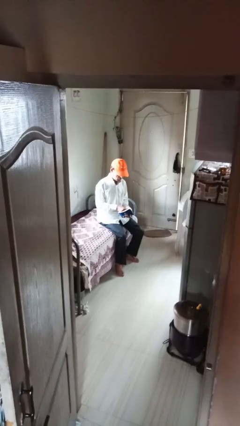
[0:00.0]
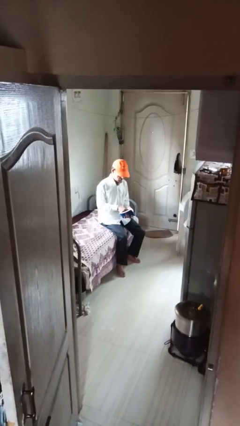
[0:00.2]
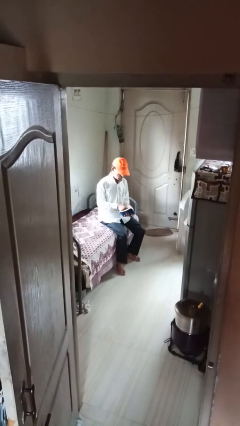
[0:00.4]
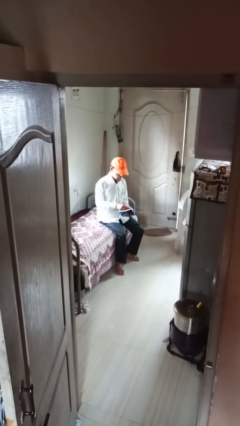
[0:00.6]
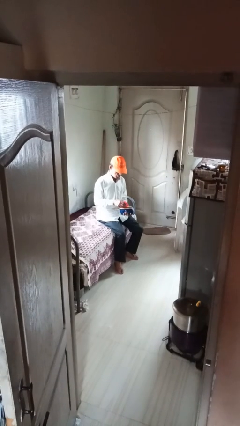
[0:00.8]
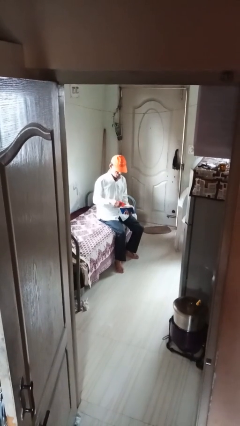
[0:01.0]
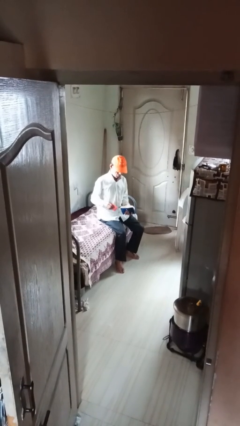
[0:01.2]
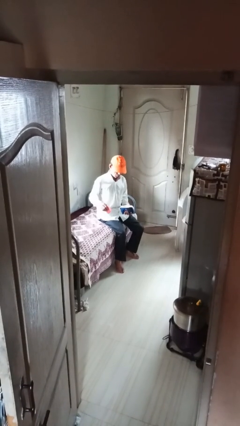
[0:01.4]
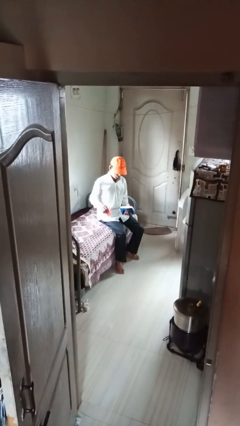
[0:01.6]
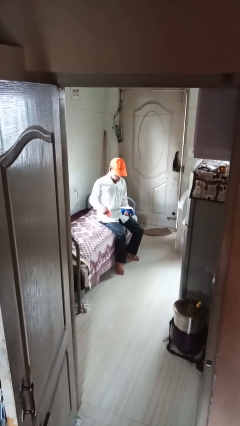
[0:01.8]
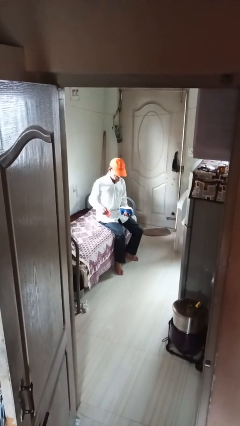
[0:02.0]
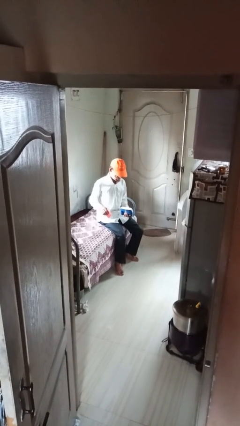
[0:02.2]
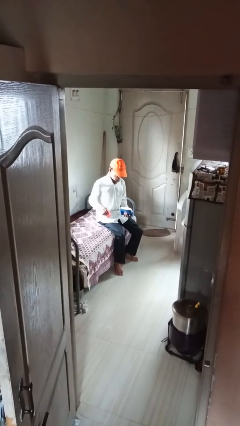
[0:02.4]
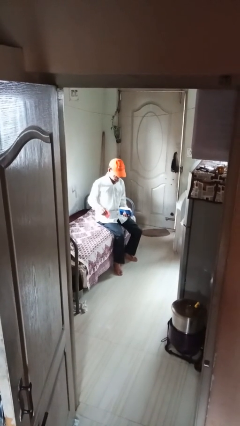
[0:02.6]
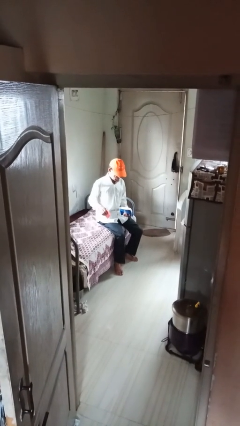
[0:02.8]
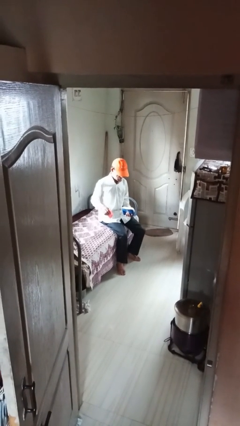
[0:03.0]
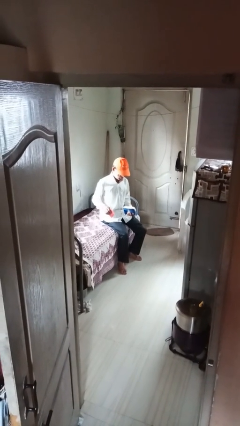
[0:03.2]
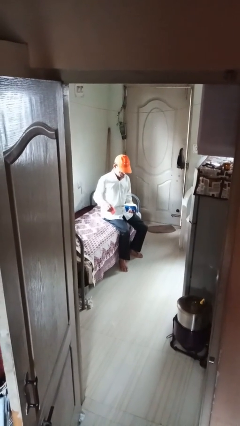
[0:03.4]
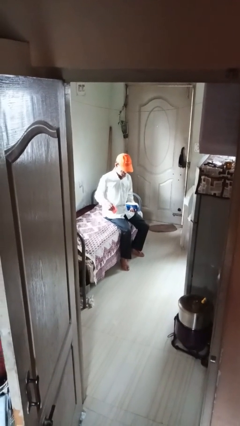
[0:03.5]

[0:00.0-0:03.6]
person takes object from purse

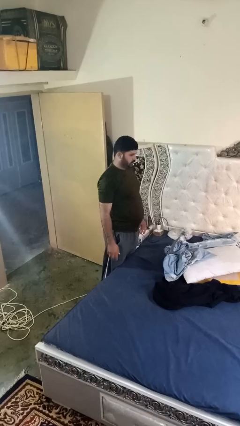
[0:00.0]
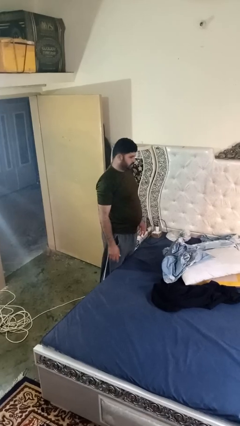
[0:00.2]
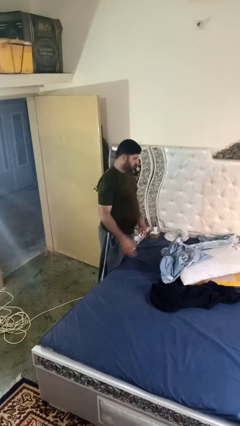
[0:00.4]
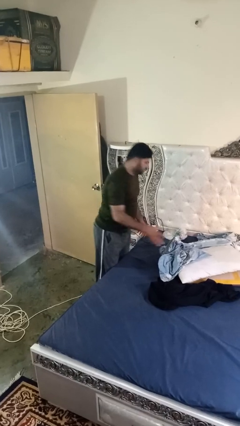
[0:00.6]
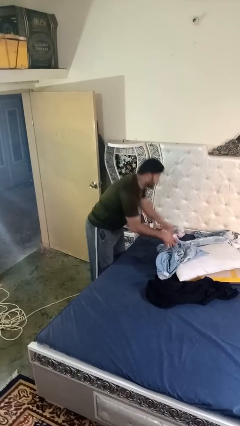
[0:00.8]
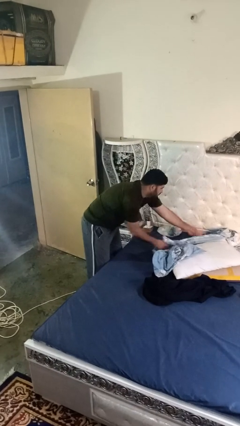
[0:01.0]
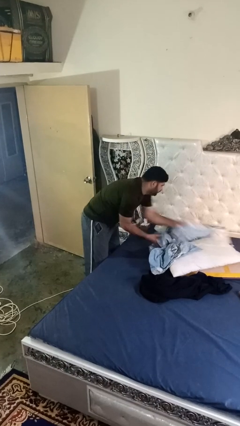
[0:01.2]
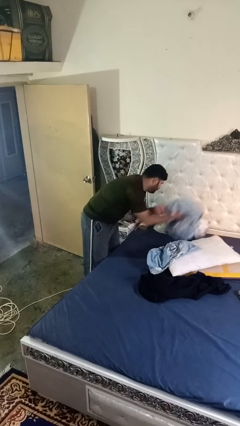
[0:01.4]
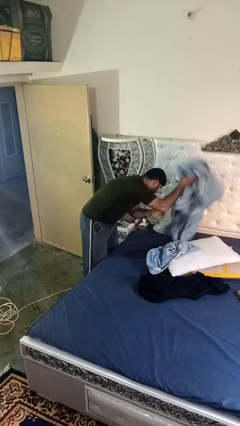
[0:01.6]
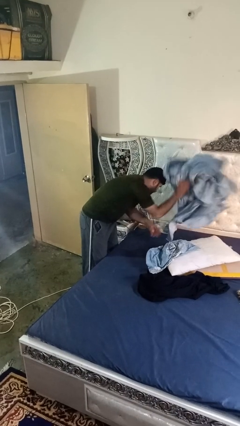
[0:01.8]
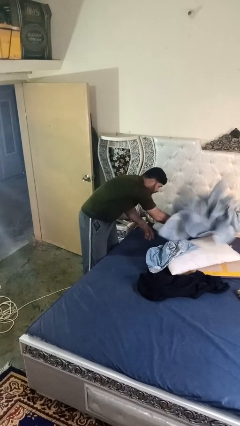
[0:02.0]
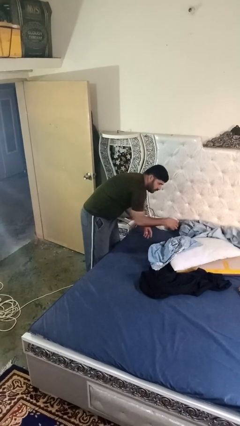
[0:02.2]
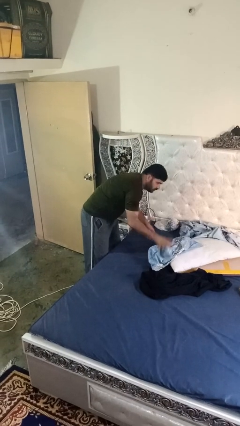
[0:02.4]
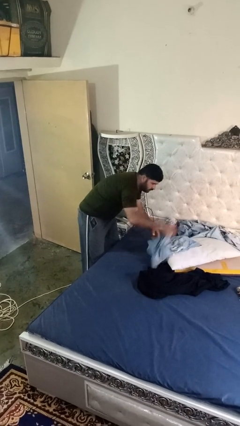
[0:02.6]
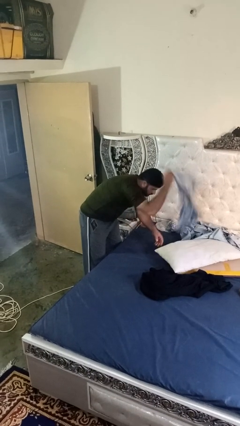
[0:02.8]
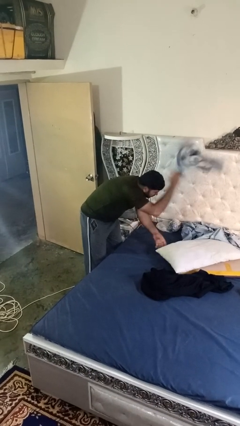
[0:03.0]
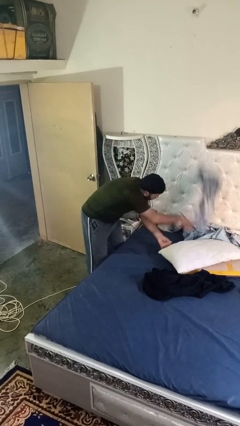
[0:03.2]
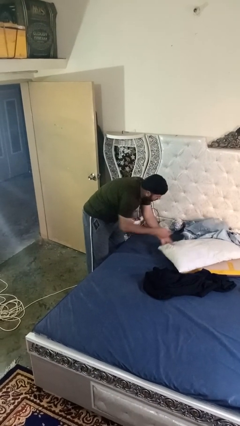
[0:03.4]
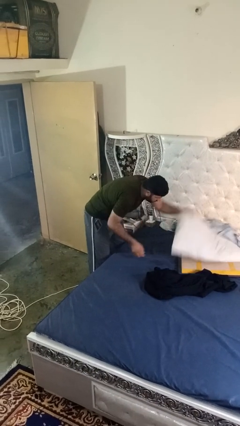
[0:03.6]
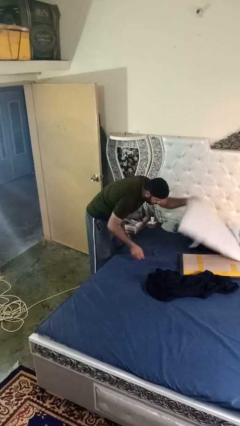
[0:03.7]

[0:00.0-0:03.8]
person searches under bed

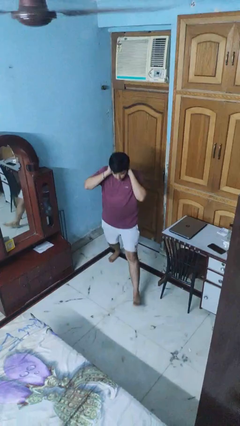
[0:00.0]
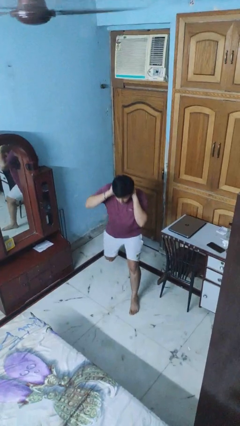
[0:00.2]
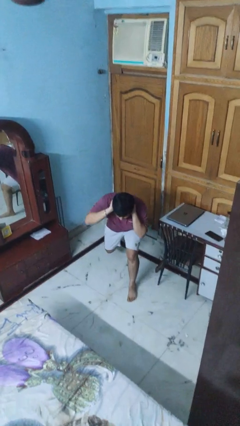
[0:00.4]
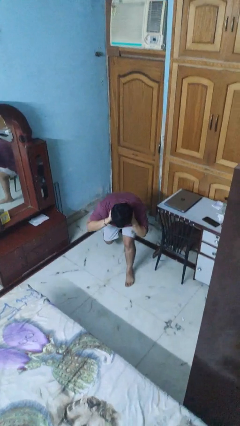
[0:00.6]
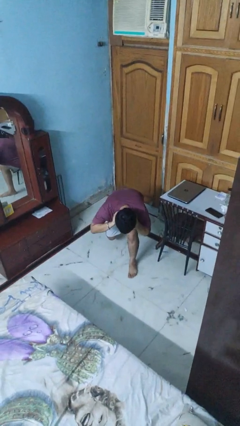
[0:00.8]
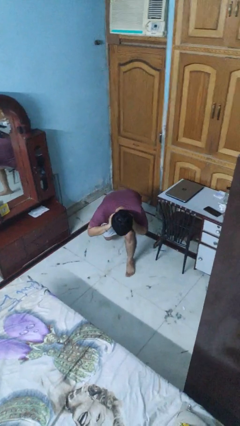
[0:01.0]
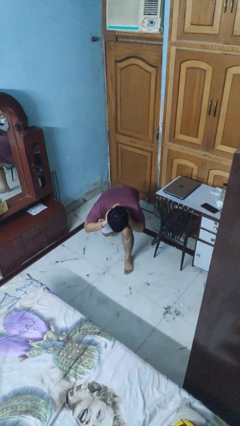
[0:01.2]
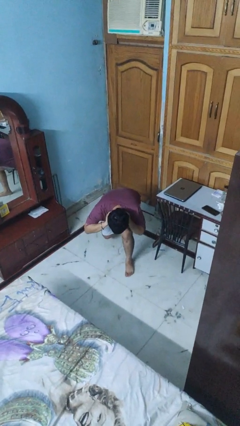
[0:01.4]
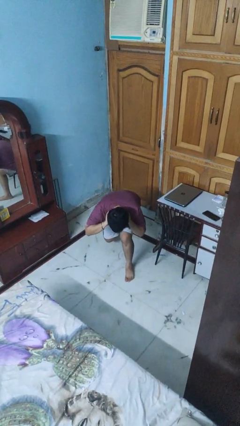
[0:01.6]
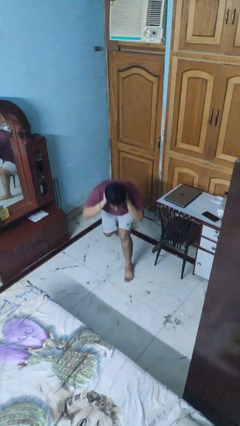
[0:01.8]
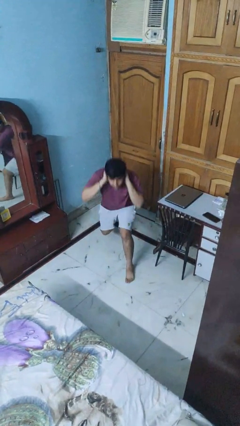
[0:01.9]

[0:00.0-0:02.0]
person exercises with lunges

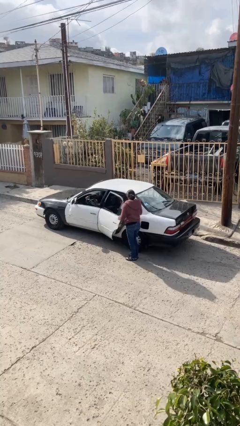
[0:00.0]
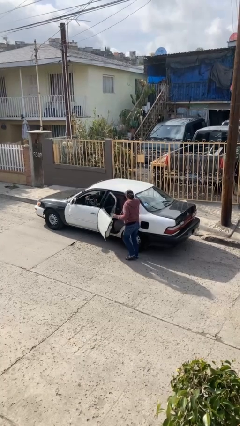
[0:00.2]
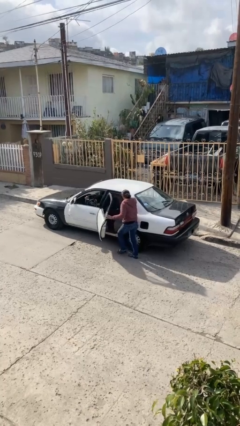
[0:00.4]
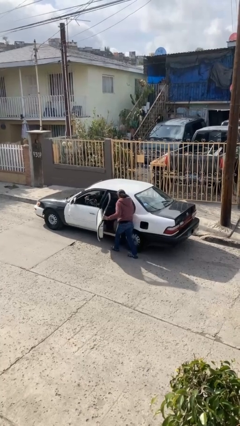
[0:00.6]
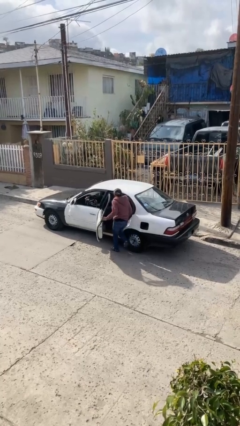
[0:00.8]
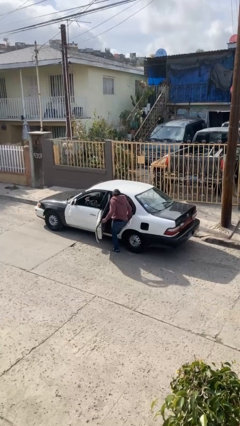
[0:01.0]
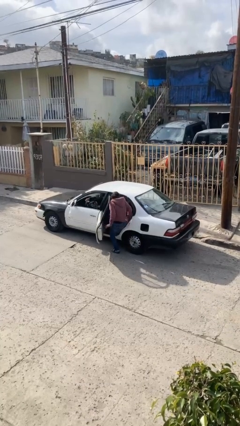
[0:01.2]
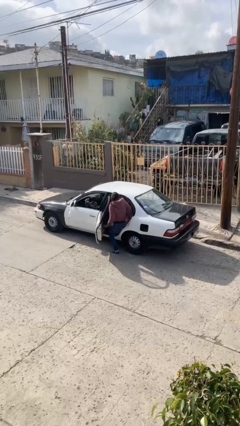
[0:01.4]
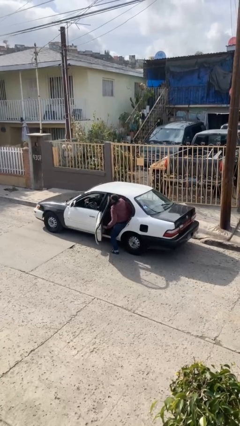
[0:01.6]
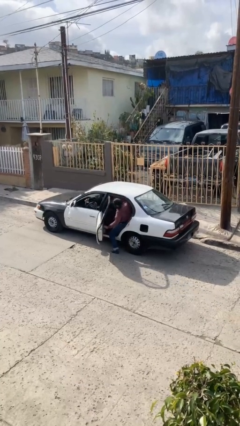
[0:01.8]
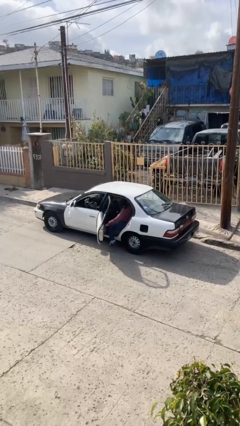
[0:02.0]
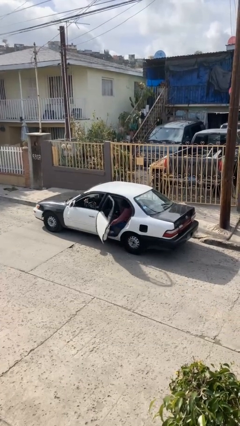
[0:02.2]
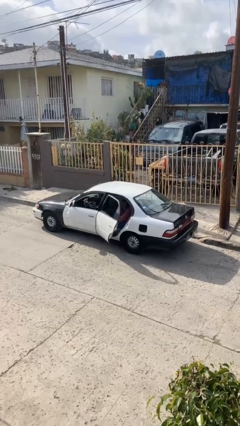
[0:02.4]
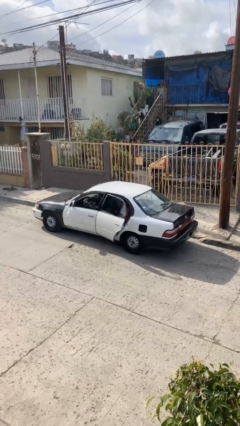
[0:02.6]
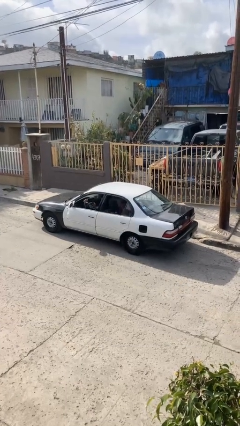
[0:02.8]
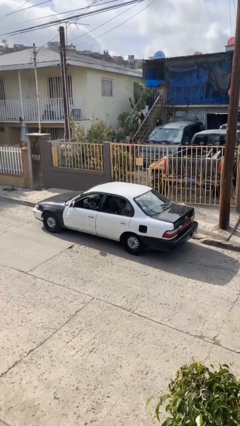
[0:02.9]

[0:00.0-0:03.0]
car picks up person

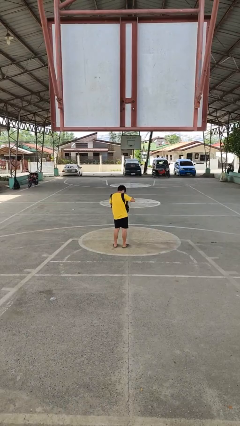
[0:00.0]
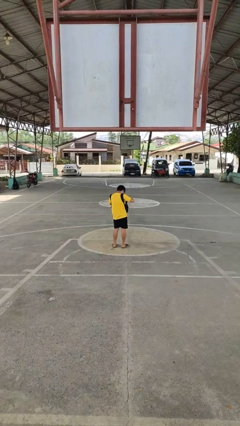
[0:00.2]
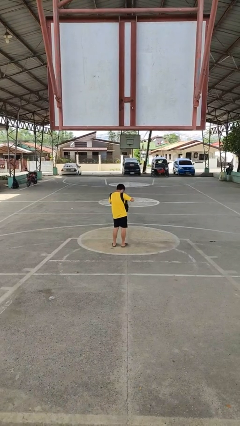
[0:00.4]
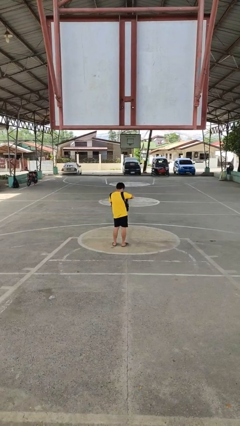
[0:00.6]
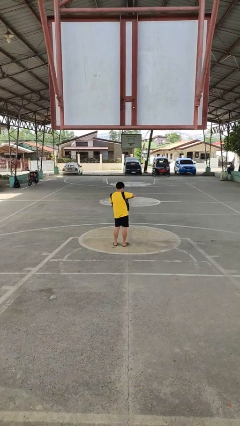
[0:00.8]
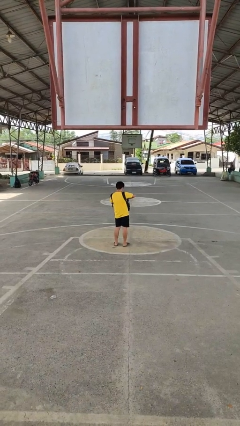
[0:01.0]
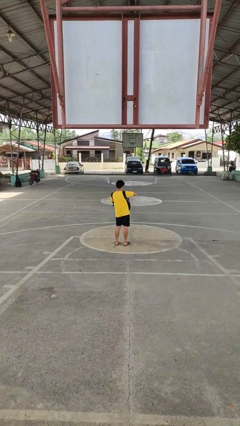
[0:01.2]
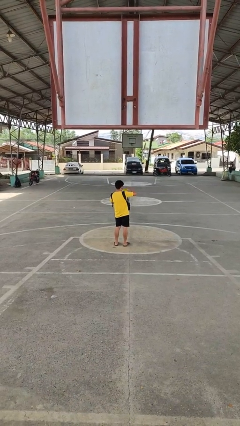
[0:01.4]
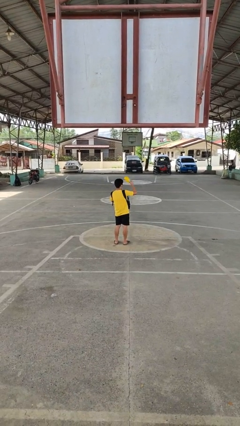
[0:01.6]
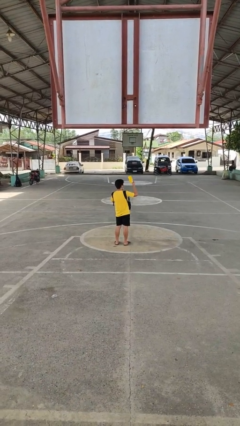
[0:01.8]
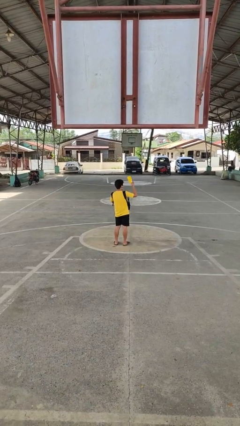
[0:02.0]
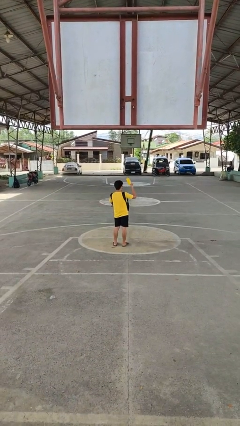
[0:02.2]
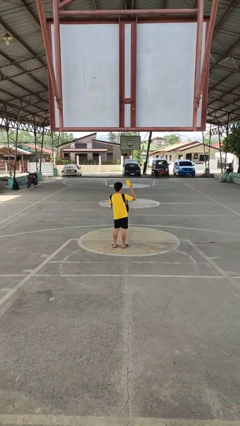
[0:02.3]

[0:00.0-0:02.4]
person takes object from backpack

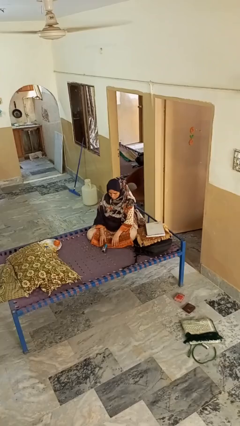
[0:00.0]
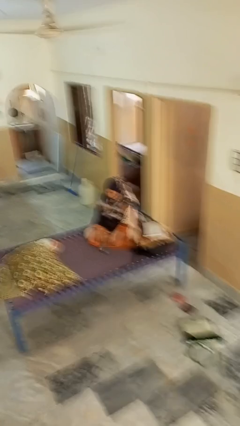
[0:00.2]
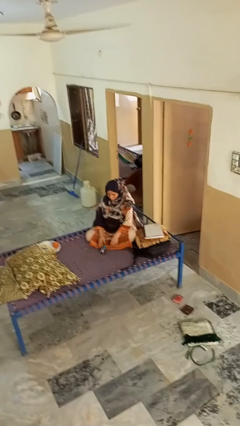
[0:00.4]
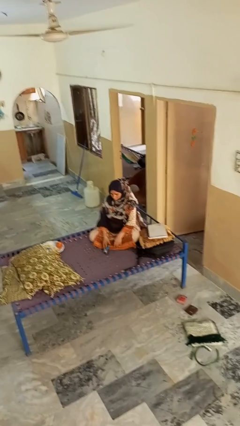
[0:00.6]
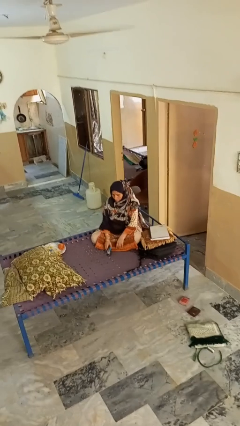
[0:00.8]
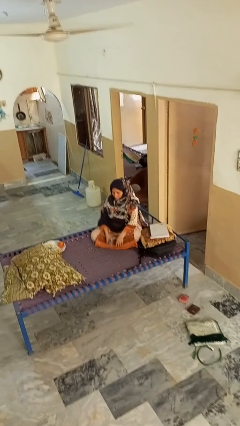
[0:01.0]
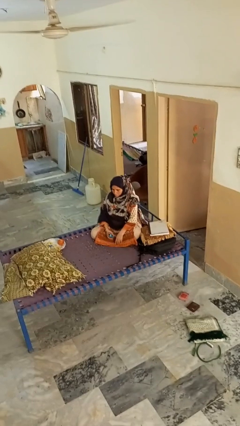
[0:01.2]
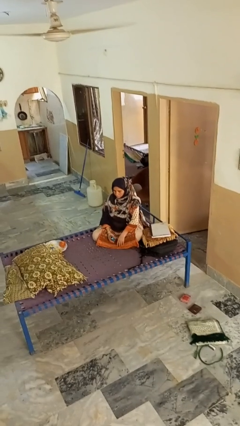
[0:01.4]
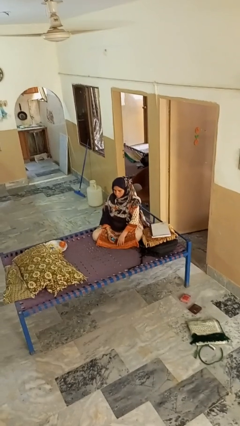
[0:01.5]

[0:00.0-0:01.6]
person picks up object from floor

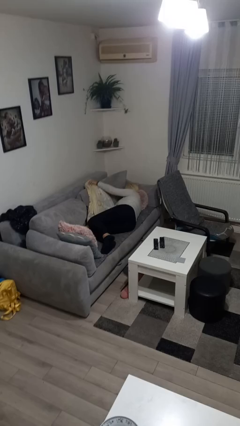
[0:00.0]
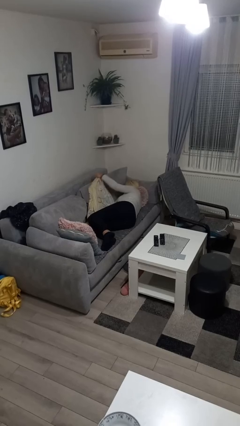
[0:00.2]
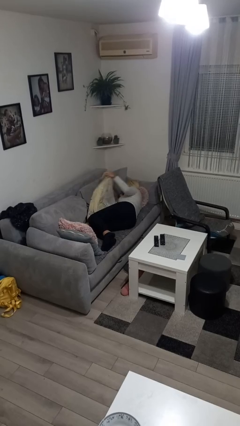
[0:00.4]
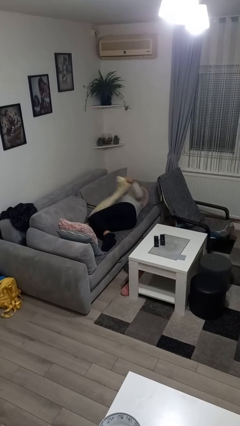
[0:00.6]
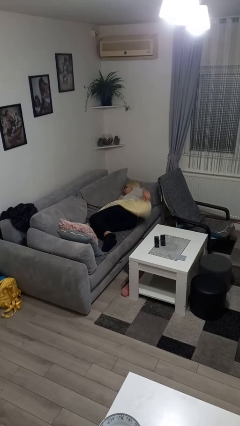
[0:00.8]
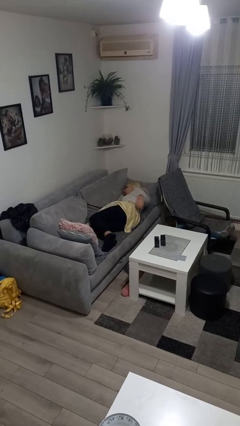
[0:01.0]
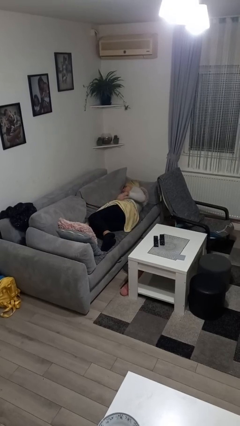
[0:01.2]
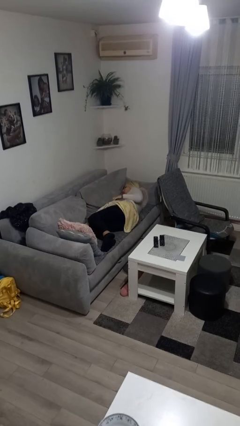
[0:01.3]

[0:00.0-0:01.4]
person covers with blanket
